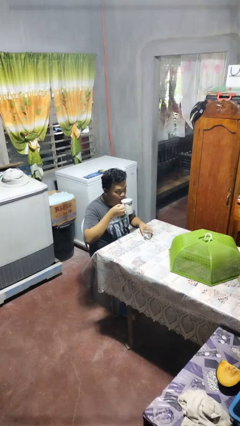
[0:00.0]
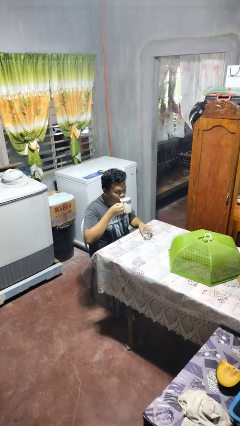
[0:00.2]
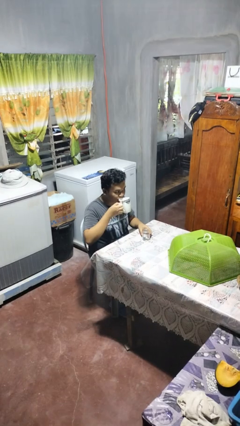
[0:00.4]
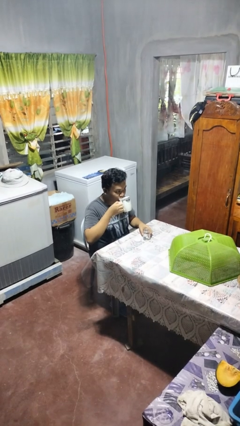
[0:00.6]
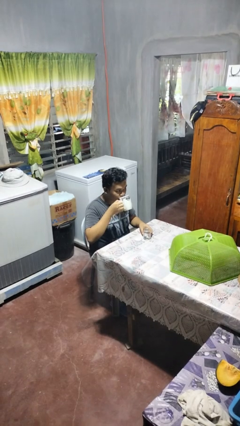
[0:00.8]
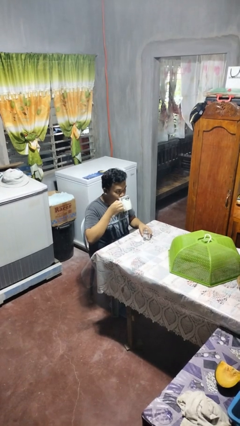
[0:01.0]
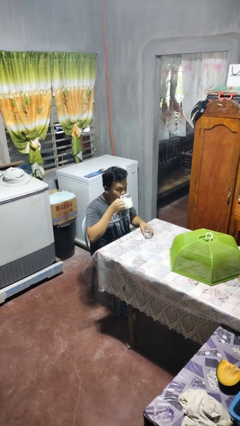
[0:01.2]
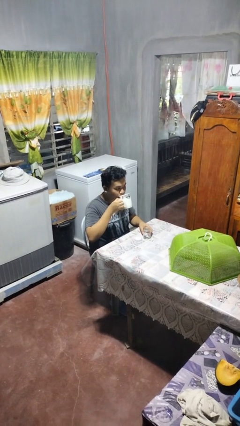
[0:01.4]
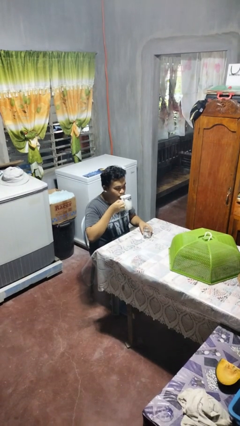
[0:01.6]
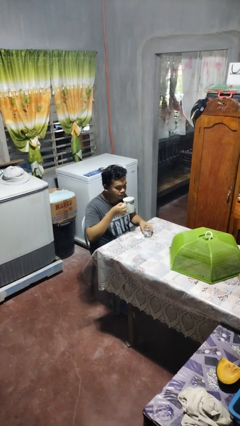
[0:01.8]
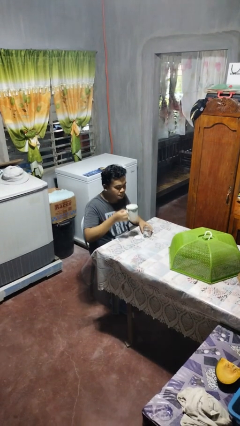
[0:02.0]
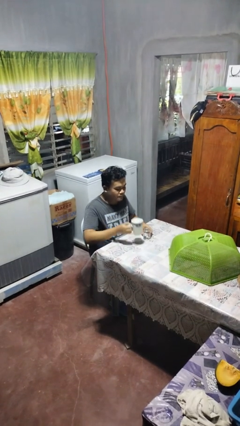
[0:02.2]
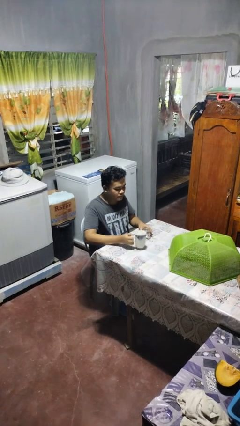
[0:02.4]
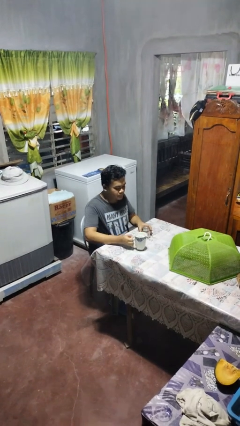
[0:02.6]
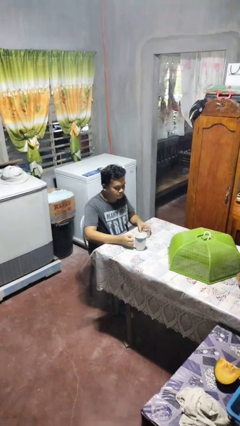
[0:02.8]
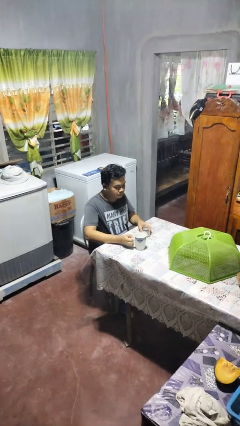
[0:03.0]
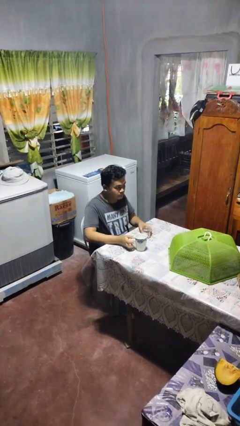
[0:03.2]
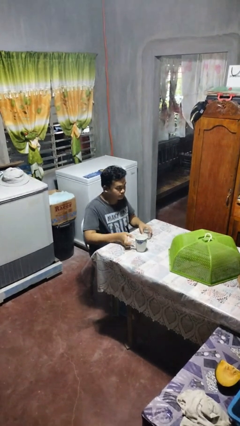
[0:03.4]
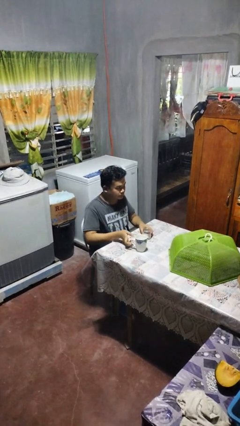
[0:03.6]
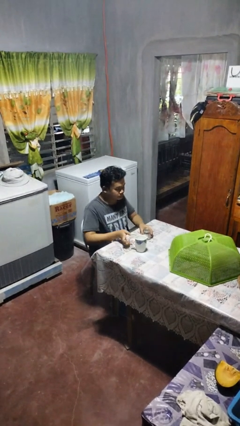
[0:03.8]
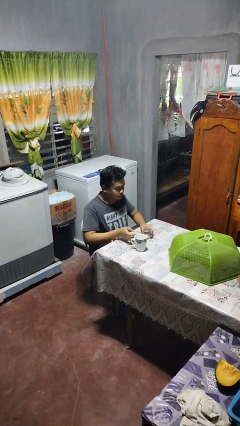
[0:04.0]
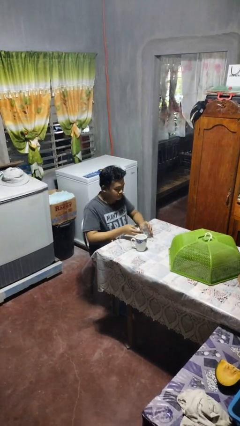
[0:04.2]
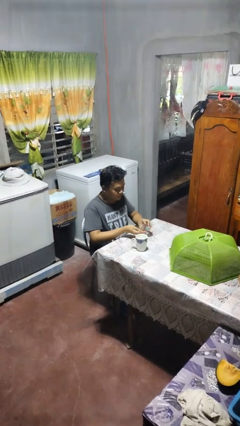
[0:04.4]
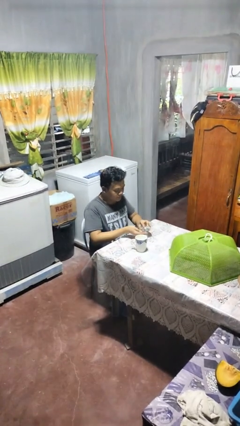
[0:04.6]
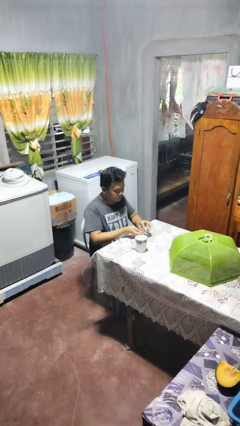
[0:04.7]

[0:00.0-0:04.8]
person drinks from cup

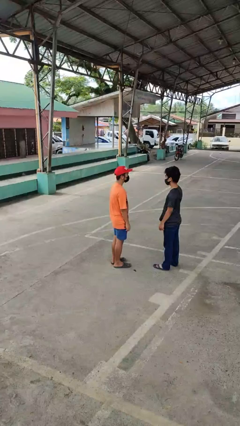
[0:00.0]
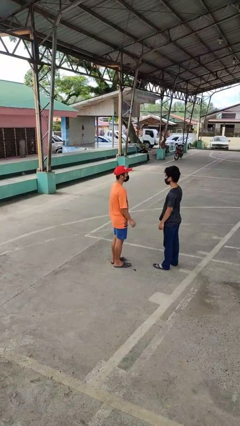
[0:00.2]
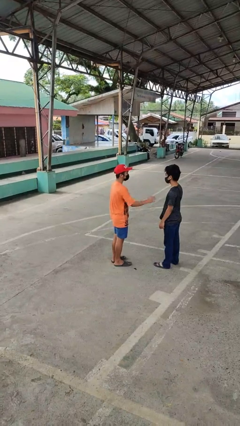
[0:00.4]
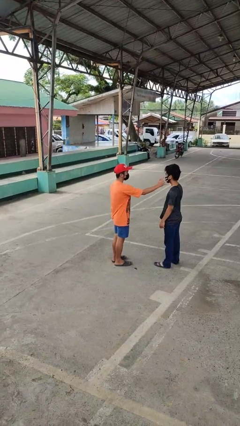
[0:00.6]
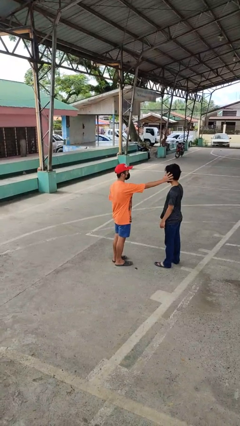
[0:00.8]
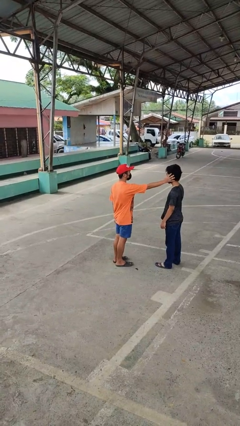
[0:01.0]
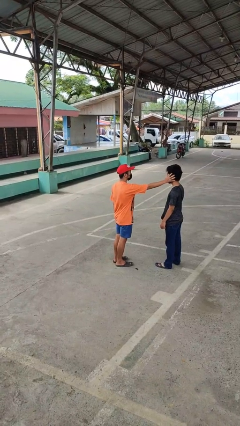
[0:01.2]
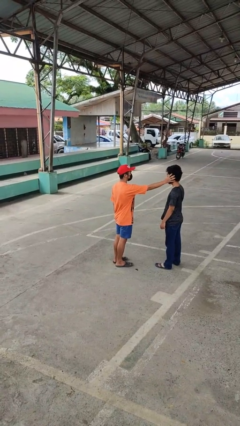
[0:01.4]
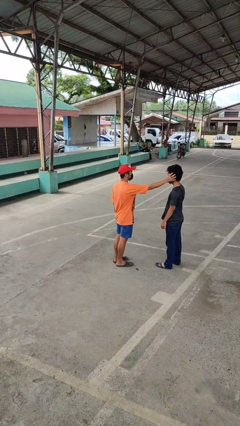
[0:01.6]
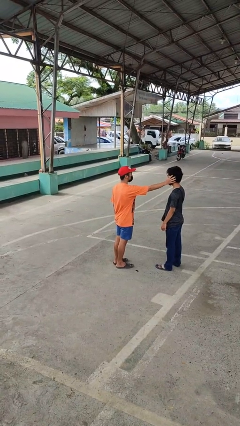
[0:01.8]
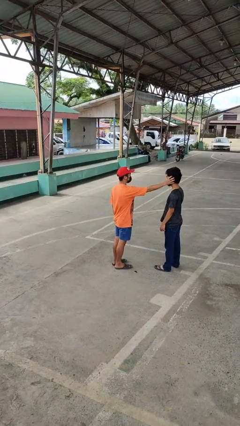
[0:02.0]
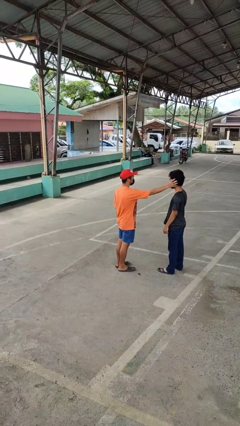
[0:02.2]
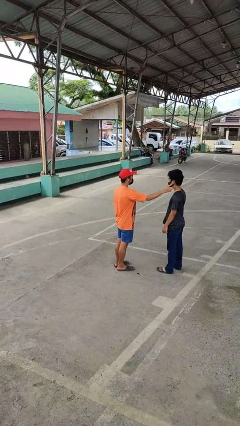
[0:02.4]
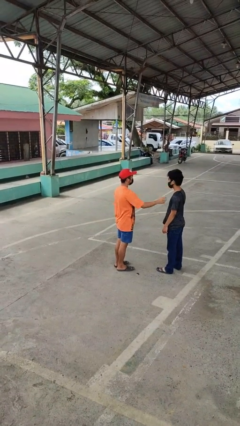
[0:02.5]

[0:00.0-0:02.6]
person touches face of person

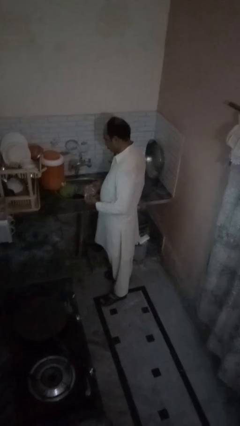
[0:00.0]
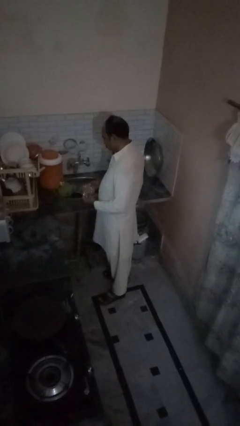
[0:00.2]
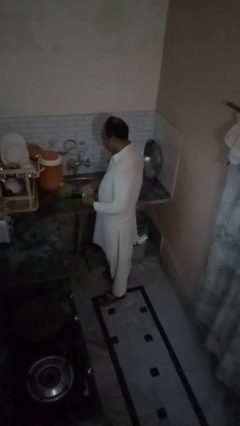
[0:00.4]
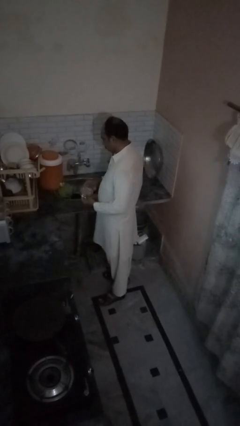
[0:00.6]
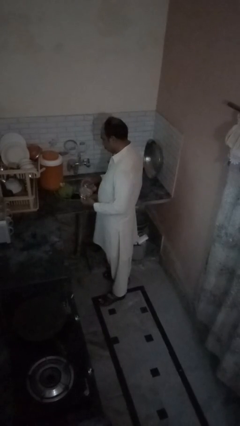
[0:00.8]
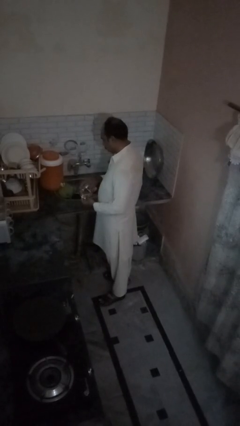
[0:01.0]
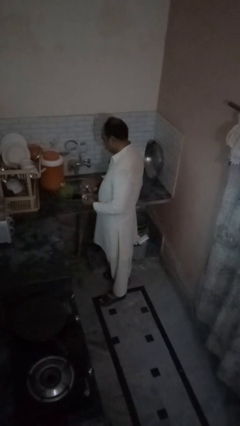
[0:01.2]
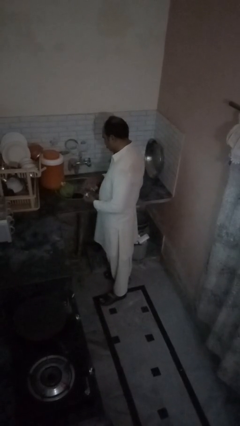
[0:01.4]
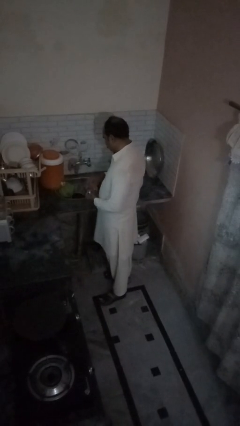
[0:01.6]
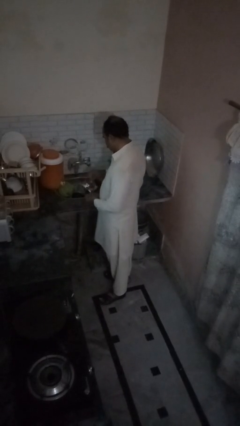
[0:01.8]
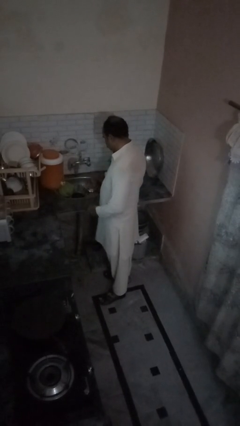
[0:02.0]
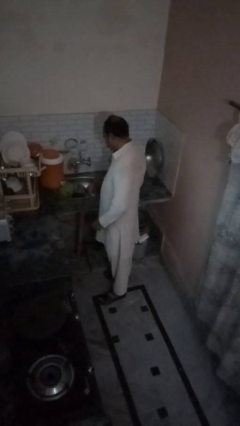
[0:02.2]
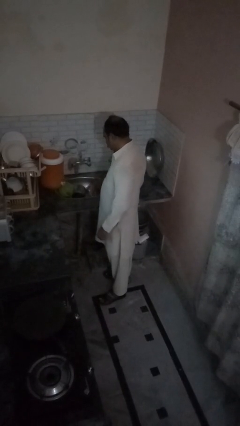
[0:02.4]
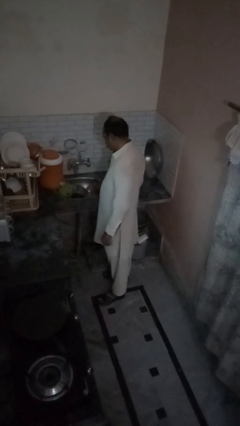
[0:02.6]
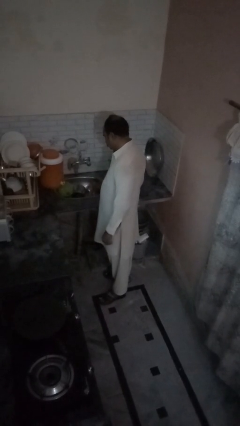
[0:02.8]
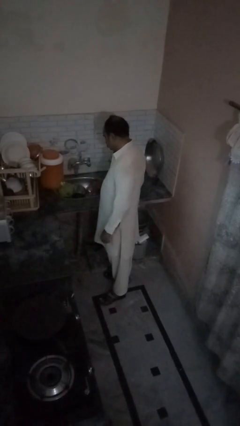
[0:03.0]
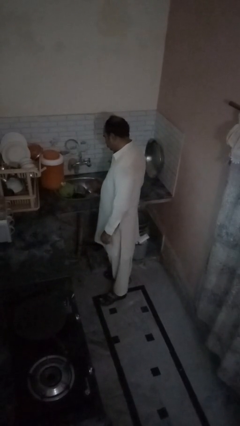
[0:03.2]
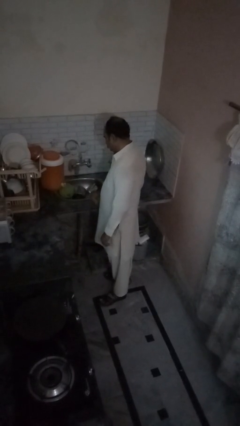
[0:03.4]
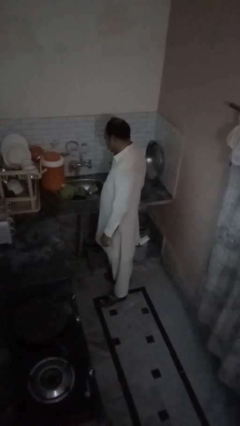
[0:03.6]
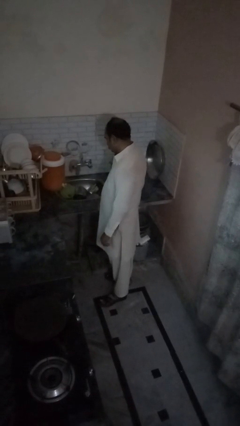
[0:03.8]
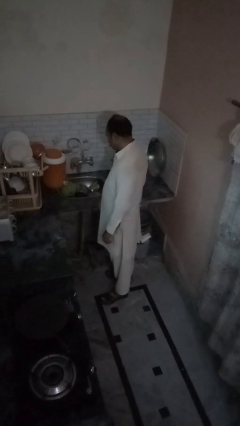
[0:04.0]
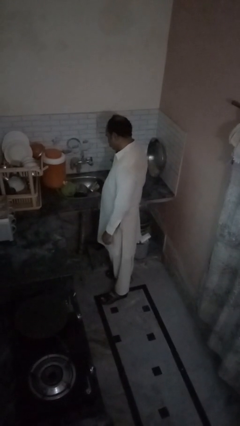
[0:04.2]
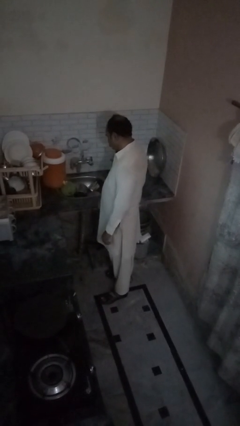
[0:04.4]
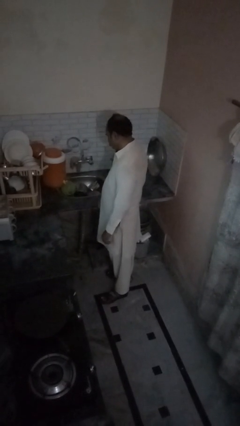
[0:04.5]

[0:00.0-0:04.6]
person puts down object on countertop

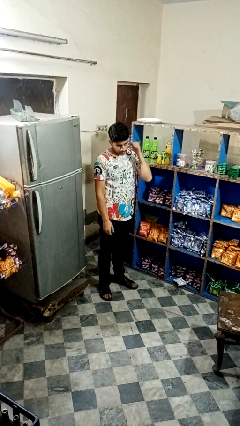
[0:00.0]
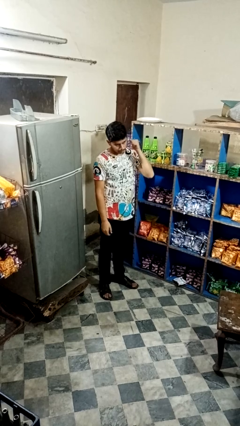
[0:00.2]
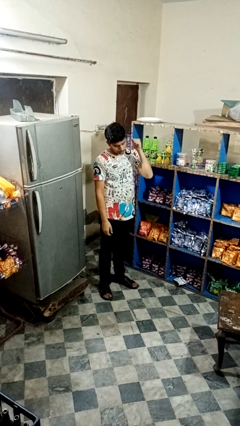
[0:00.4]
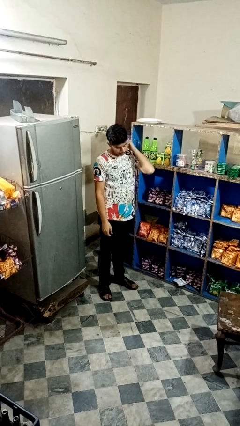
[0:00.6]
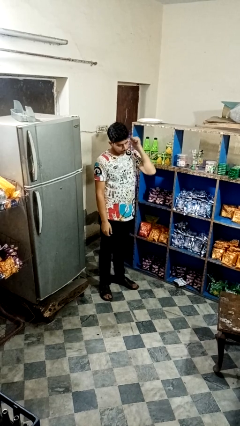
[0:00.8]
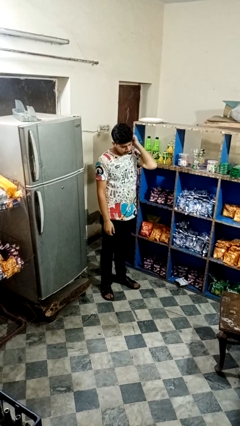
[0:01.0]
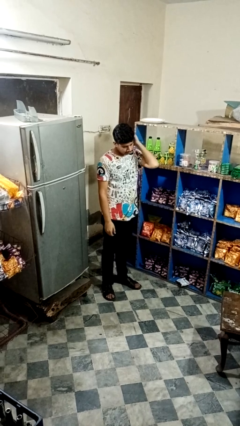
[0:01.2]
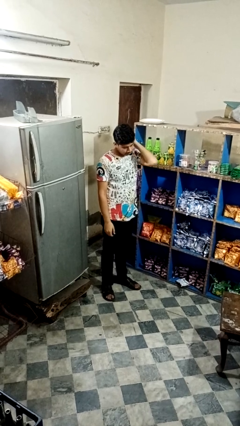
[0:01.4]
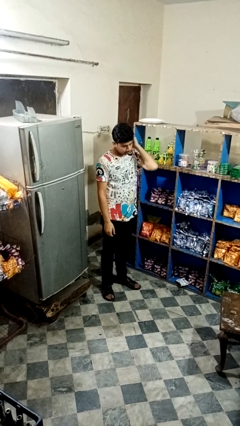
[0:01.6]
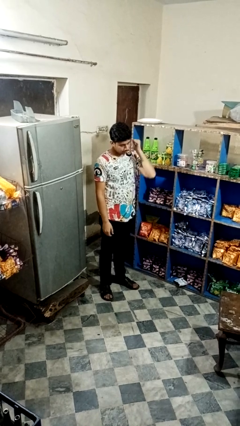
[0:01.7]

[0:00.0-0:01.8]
person gestures behind me

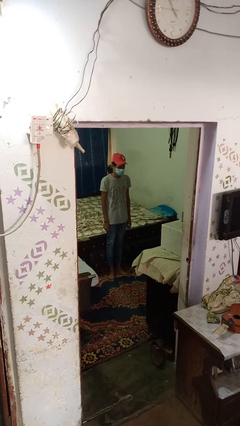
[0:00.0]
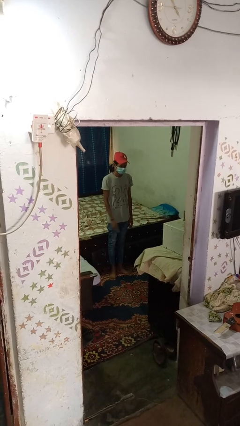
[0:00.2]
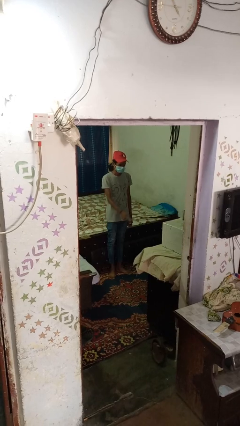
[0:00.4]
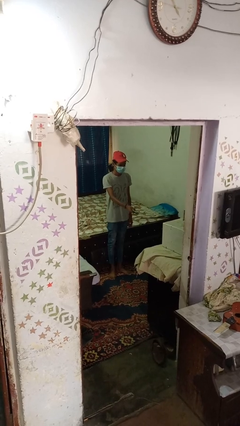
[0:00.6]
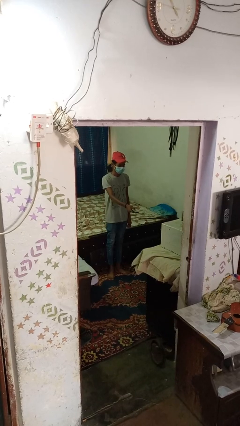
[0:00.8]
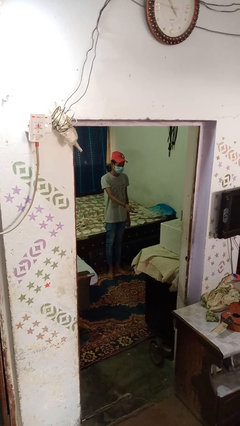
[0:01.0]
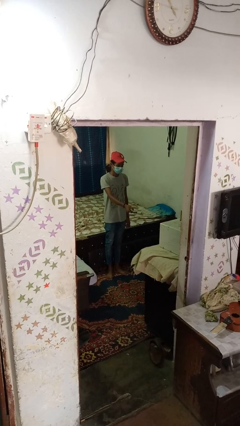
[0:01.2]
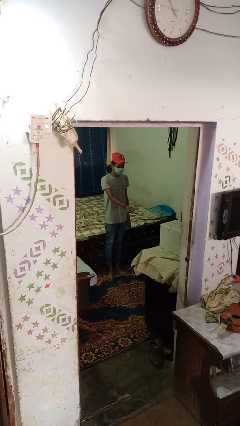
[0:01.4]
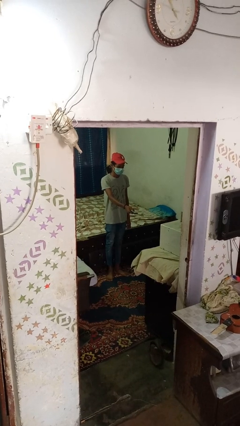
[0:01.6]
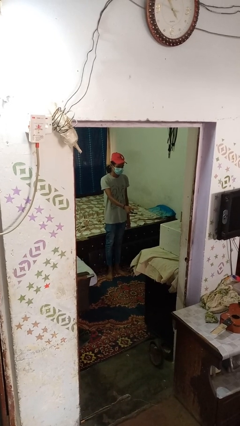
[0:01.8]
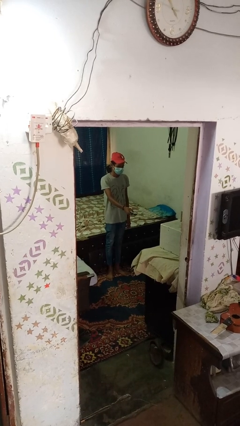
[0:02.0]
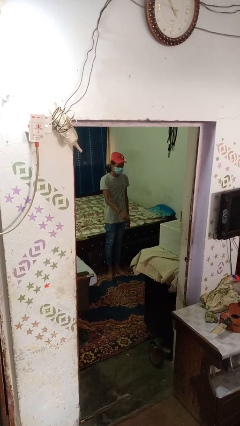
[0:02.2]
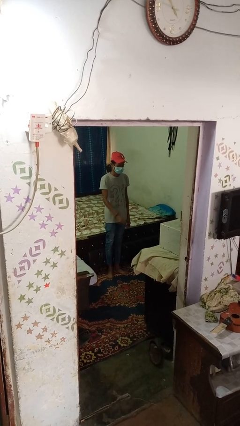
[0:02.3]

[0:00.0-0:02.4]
person uses television remote

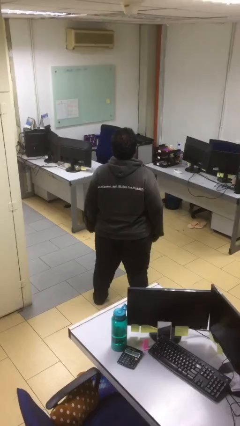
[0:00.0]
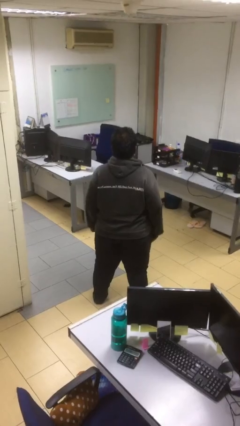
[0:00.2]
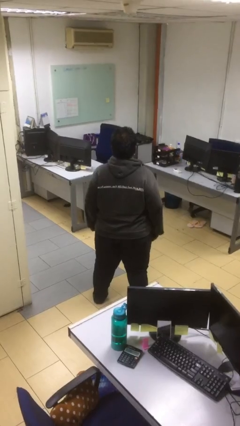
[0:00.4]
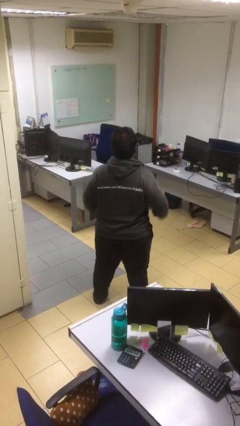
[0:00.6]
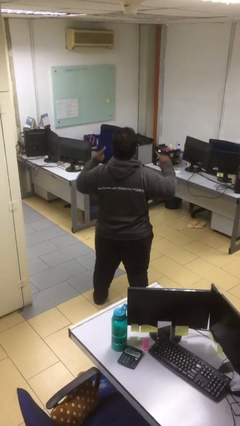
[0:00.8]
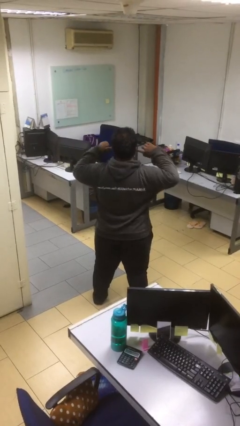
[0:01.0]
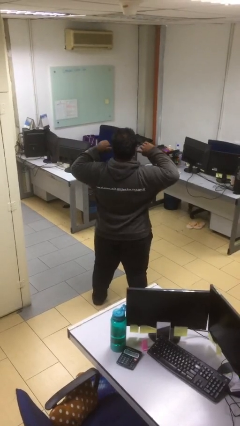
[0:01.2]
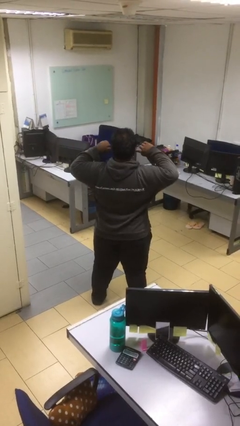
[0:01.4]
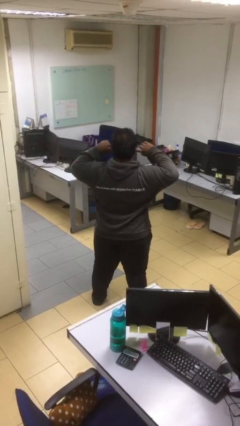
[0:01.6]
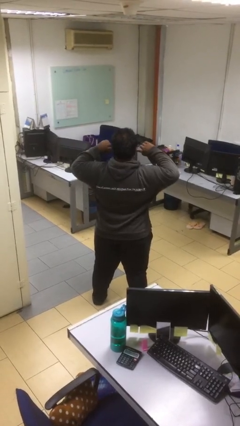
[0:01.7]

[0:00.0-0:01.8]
person puts fingers in ear
